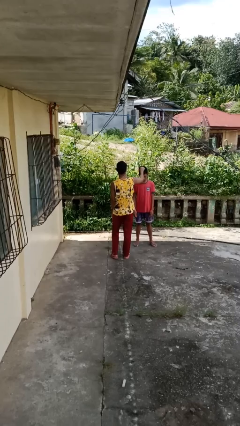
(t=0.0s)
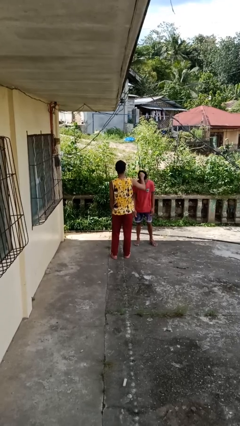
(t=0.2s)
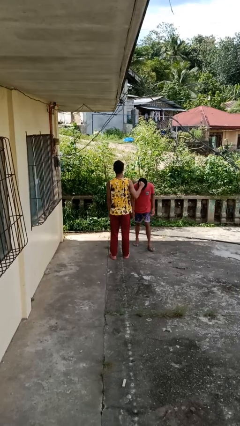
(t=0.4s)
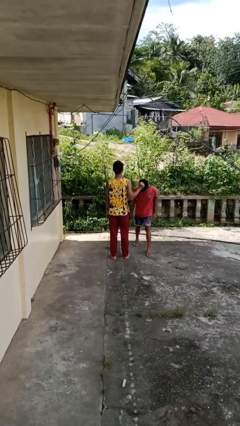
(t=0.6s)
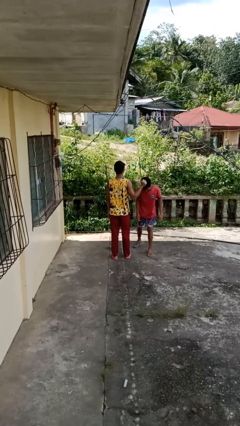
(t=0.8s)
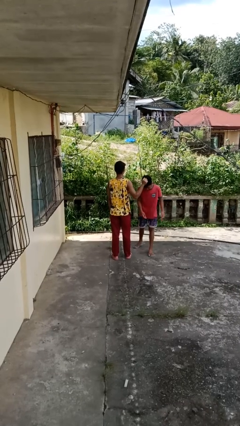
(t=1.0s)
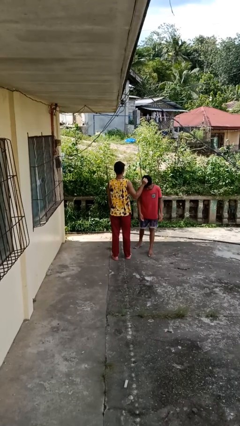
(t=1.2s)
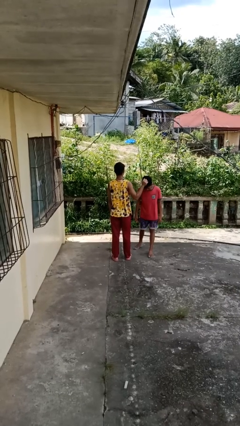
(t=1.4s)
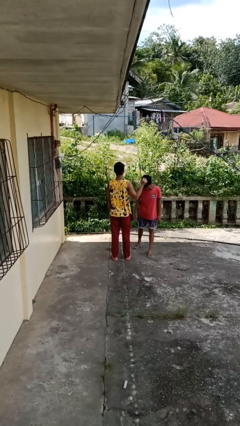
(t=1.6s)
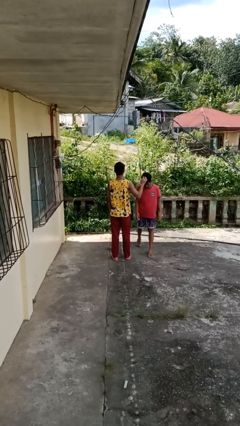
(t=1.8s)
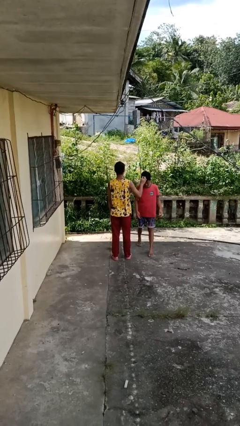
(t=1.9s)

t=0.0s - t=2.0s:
person grabs person by hair

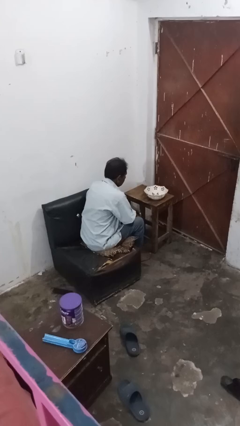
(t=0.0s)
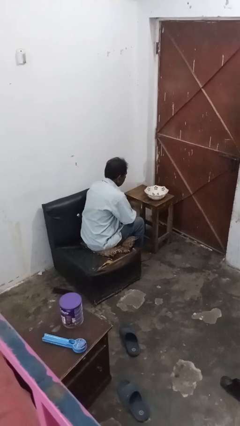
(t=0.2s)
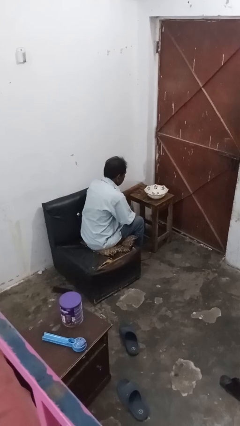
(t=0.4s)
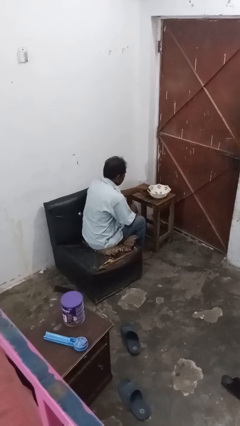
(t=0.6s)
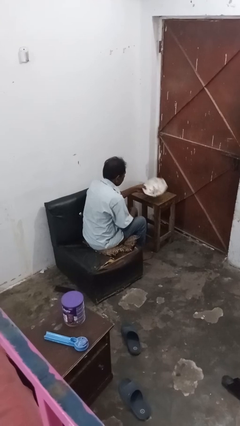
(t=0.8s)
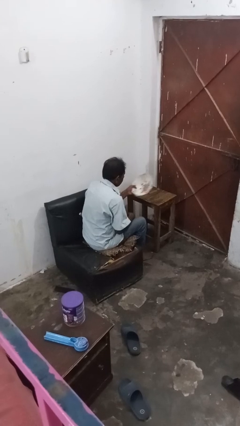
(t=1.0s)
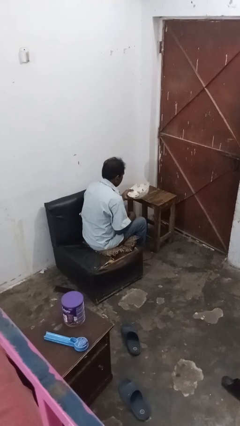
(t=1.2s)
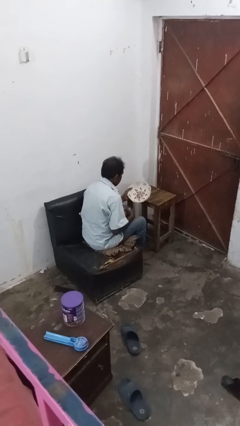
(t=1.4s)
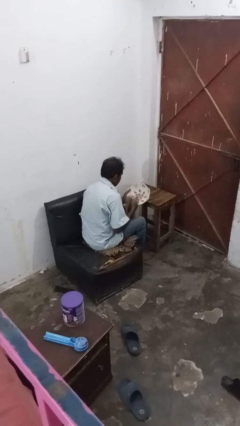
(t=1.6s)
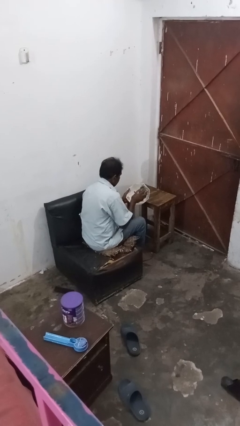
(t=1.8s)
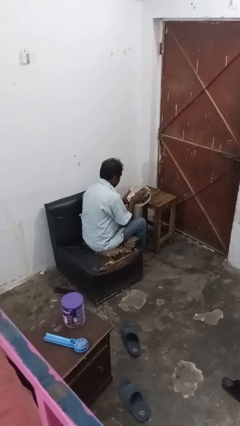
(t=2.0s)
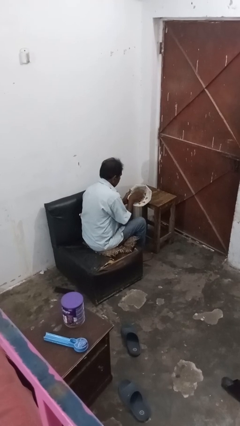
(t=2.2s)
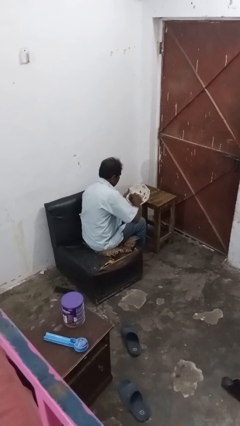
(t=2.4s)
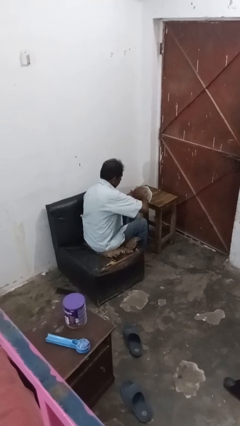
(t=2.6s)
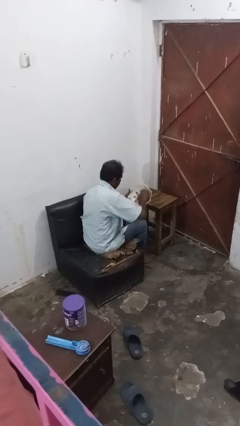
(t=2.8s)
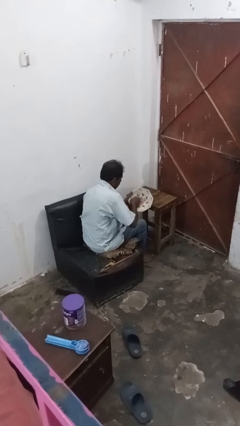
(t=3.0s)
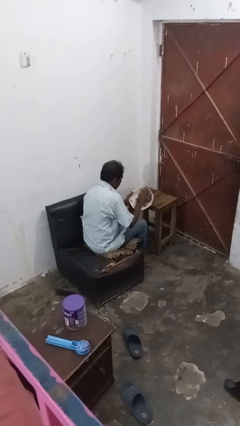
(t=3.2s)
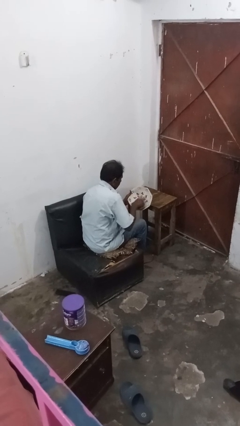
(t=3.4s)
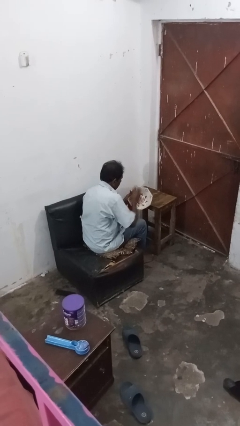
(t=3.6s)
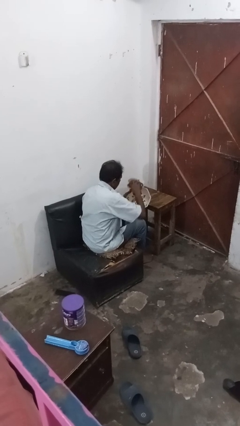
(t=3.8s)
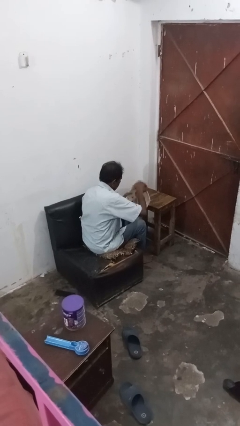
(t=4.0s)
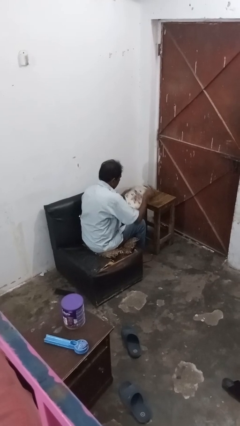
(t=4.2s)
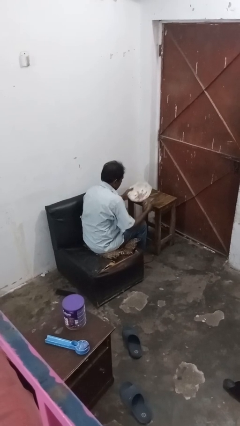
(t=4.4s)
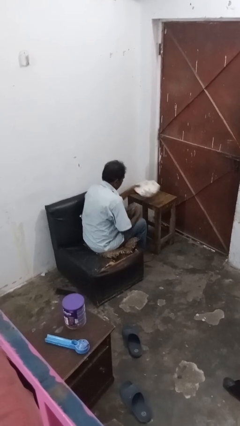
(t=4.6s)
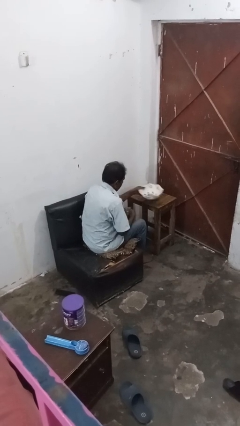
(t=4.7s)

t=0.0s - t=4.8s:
person dries dish

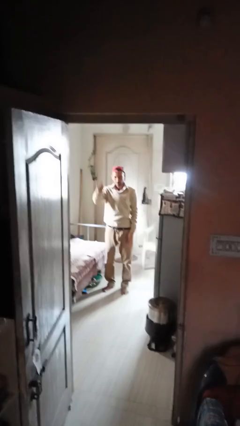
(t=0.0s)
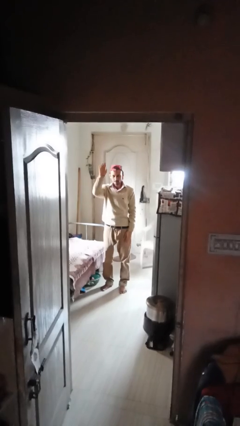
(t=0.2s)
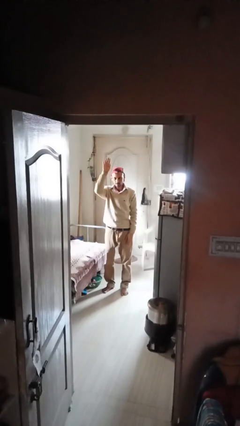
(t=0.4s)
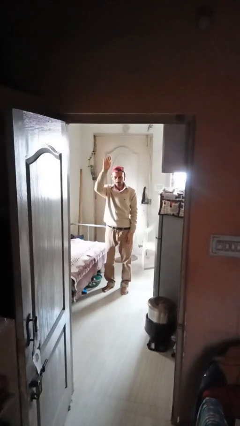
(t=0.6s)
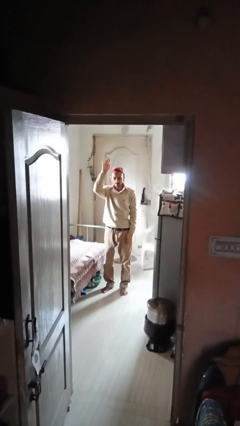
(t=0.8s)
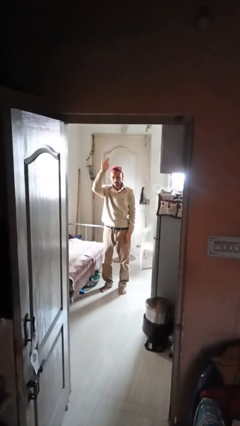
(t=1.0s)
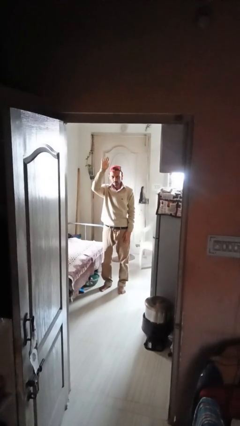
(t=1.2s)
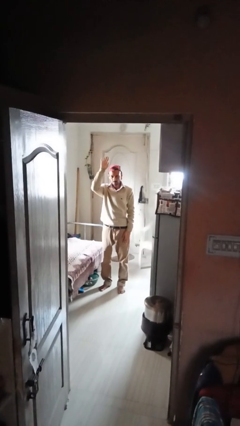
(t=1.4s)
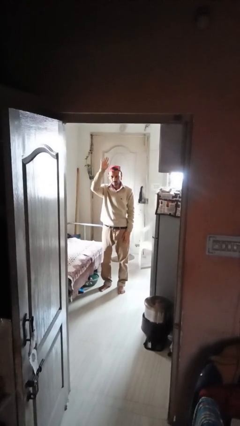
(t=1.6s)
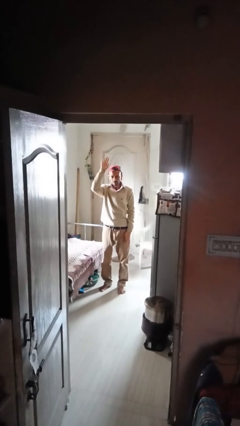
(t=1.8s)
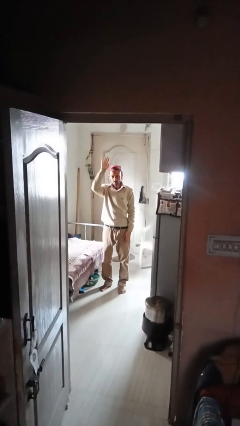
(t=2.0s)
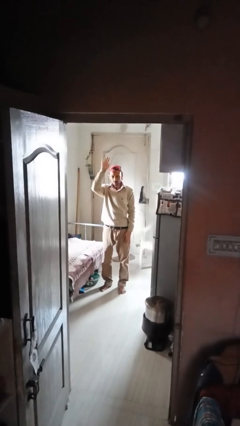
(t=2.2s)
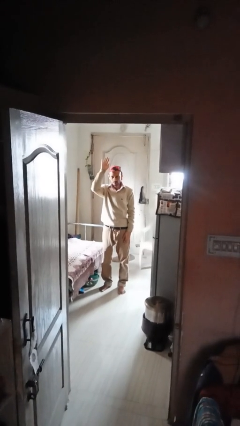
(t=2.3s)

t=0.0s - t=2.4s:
person gestures raise hand

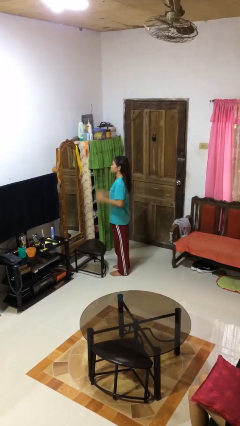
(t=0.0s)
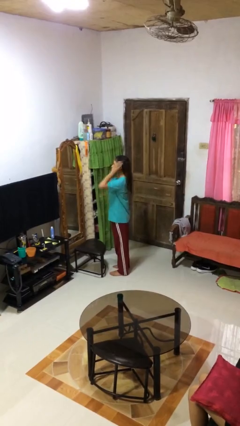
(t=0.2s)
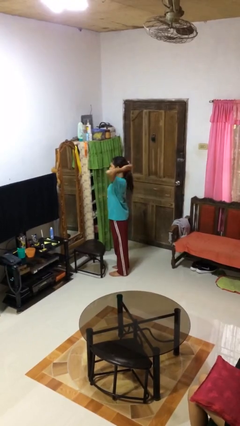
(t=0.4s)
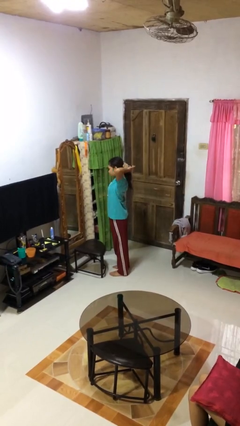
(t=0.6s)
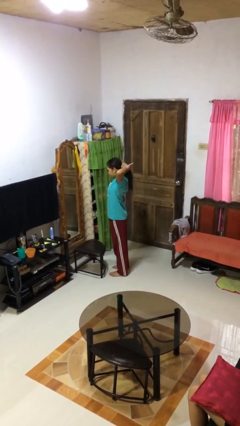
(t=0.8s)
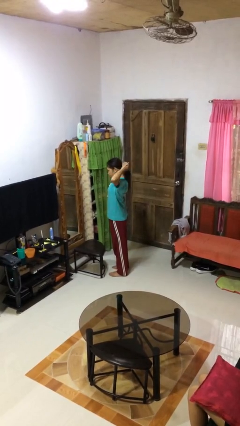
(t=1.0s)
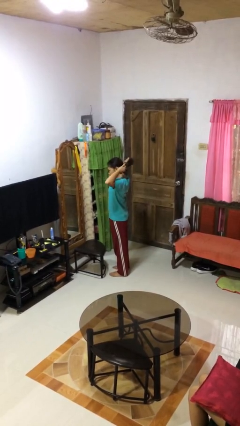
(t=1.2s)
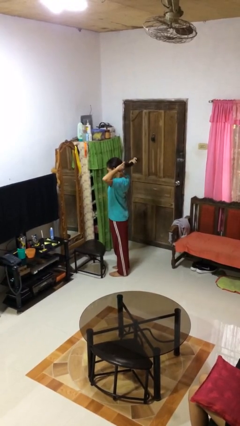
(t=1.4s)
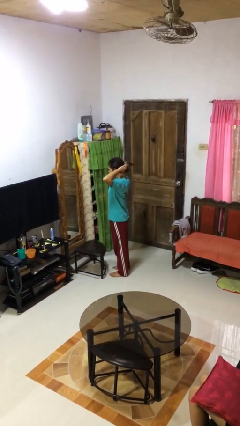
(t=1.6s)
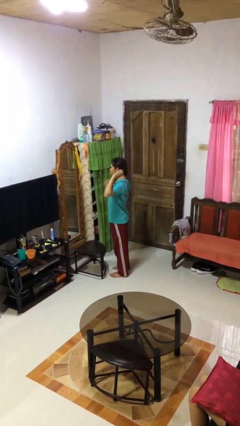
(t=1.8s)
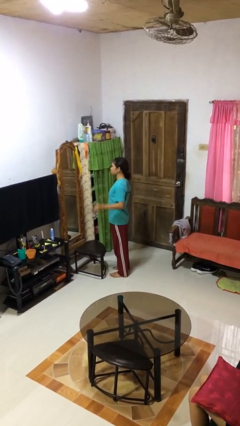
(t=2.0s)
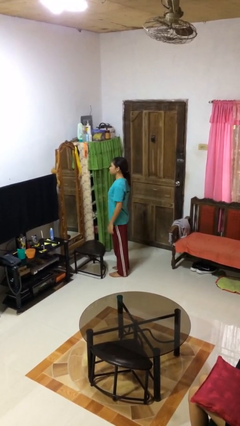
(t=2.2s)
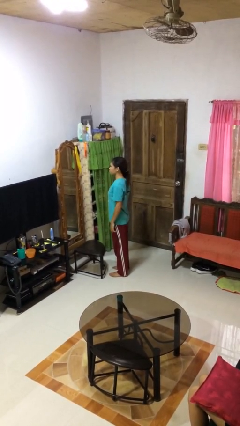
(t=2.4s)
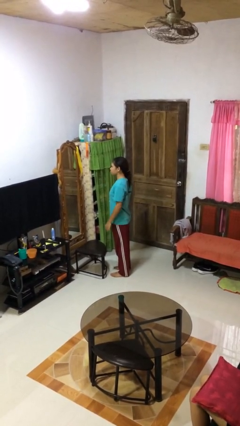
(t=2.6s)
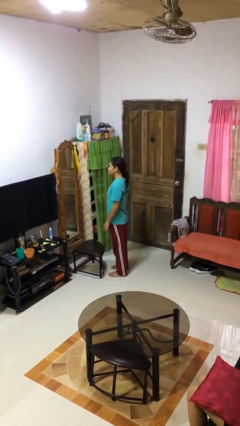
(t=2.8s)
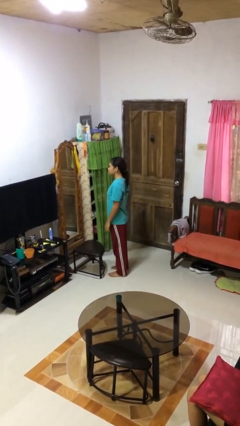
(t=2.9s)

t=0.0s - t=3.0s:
person puts hair in ponytail

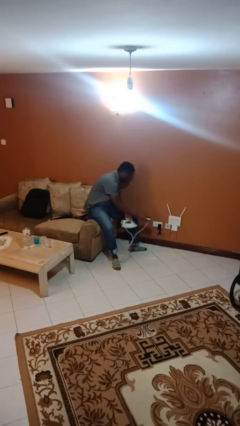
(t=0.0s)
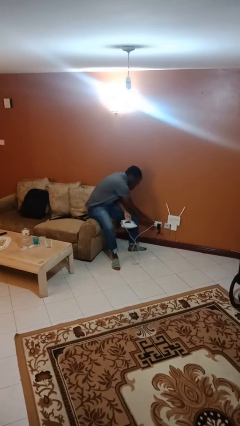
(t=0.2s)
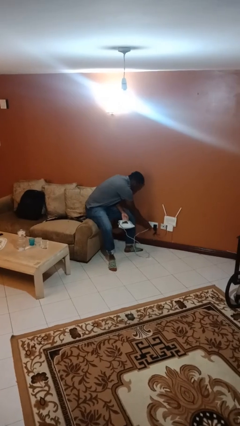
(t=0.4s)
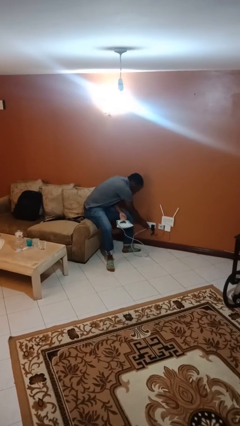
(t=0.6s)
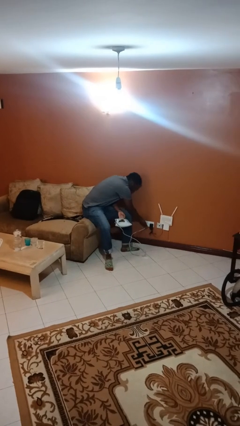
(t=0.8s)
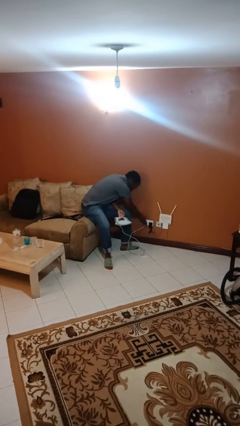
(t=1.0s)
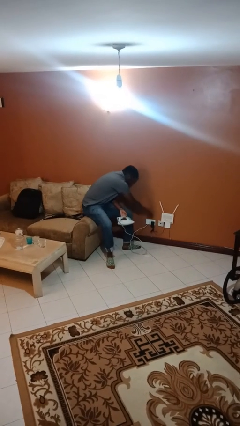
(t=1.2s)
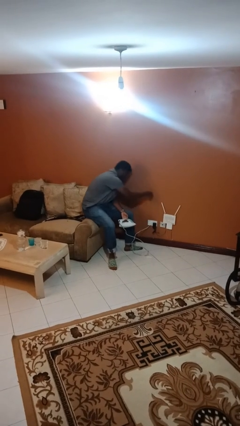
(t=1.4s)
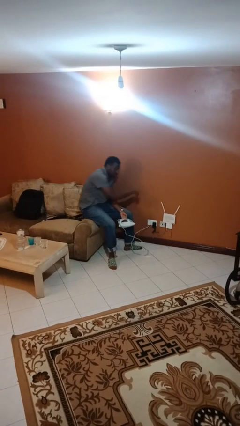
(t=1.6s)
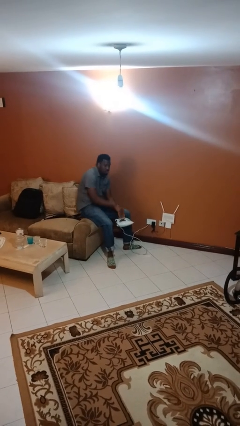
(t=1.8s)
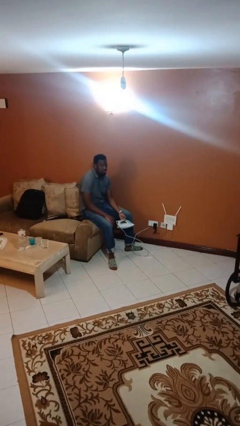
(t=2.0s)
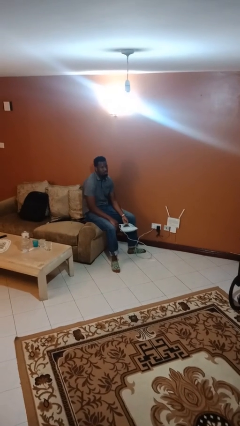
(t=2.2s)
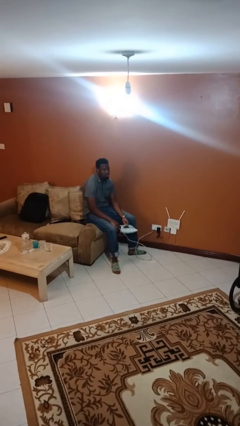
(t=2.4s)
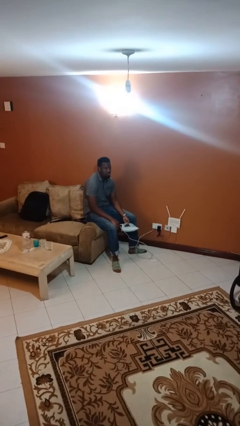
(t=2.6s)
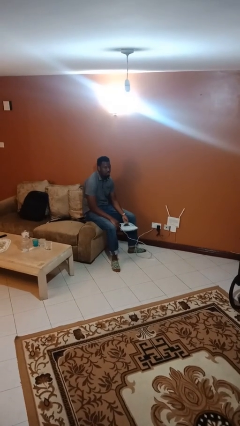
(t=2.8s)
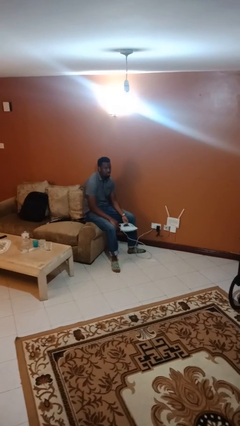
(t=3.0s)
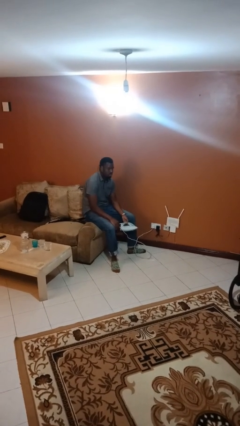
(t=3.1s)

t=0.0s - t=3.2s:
person plugs into electrical socket

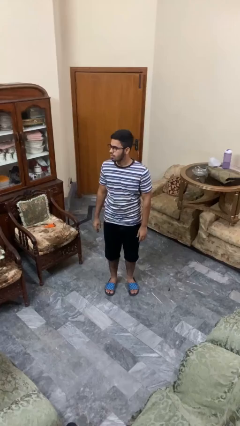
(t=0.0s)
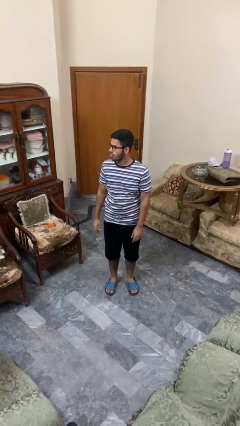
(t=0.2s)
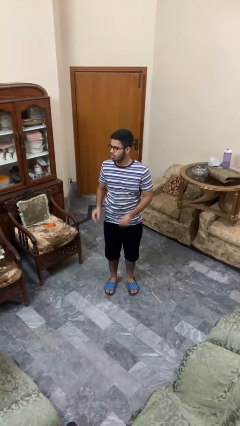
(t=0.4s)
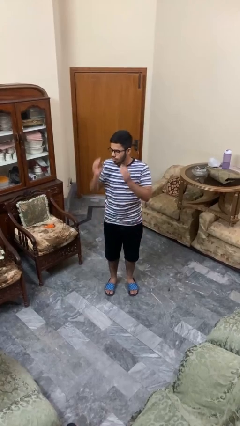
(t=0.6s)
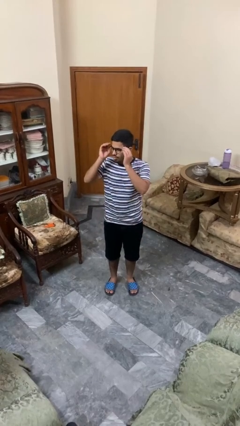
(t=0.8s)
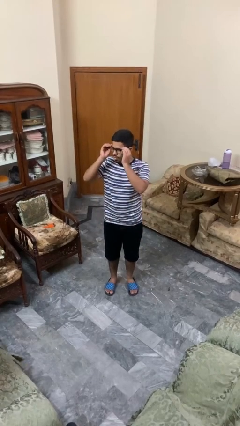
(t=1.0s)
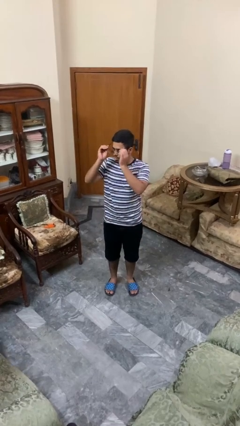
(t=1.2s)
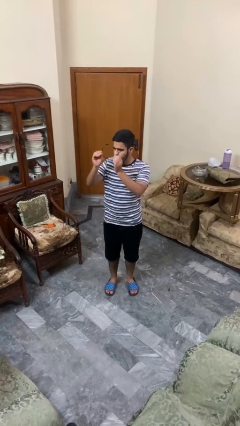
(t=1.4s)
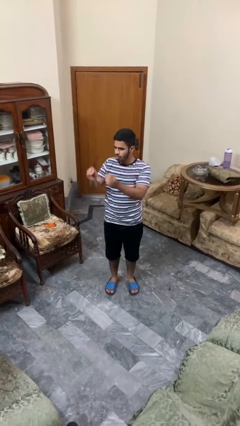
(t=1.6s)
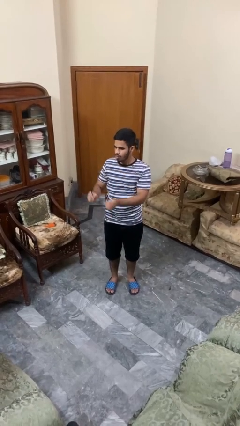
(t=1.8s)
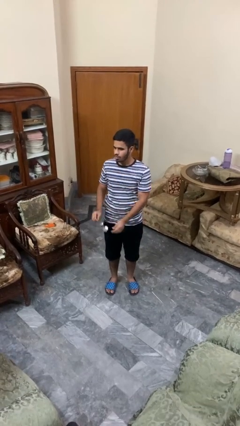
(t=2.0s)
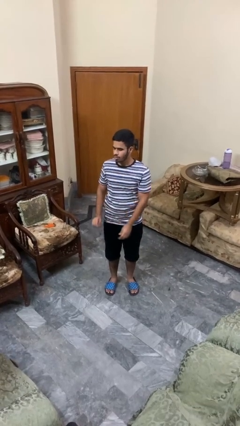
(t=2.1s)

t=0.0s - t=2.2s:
person takes off glasses
